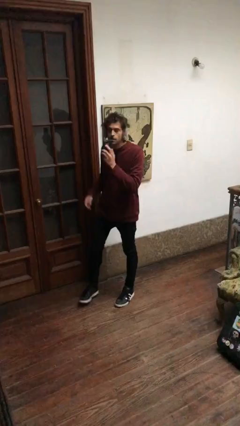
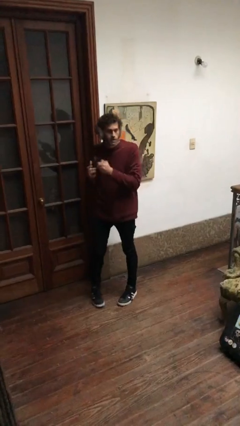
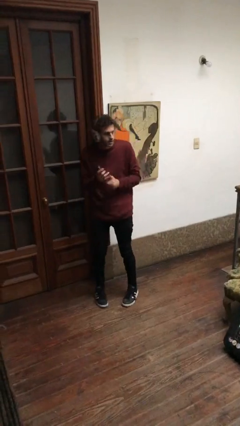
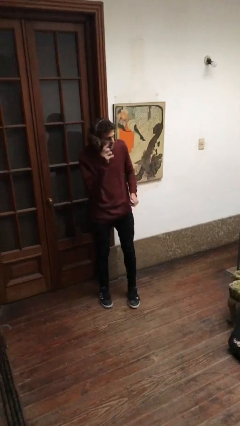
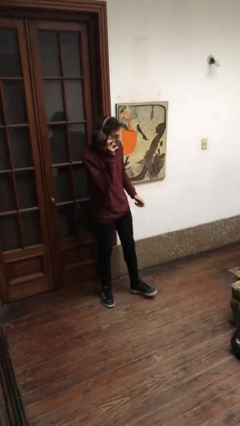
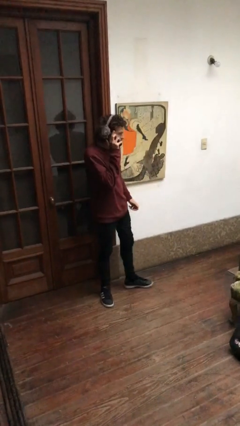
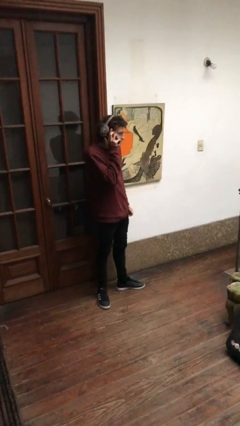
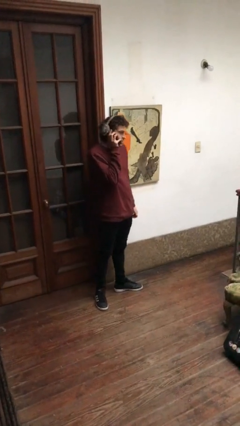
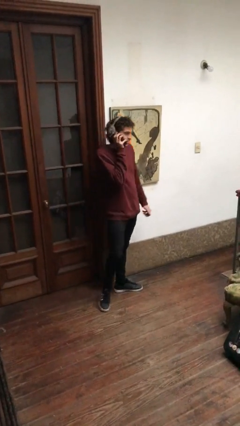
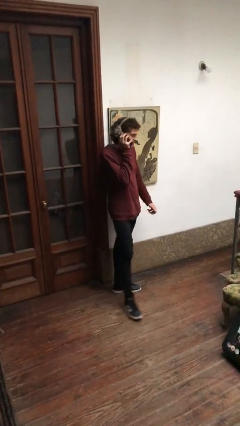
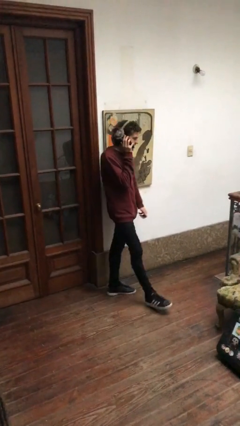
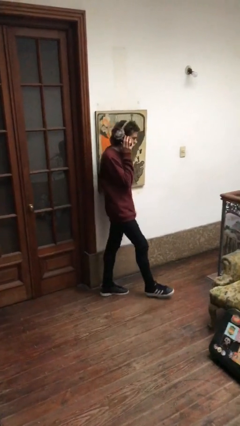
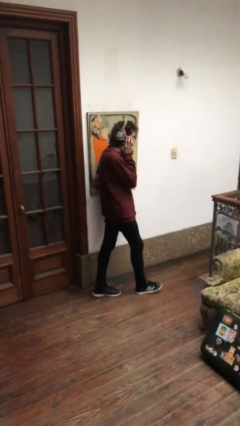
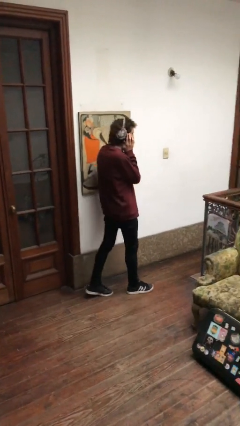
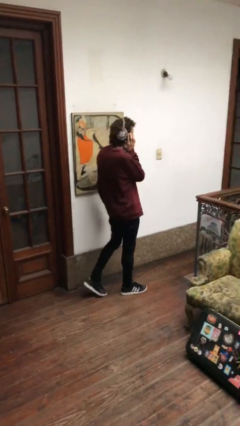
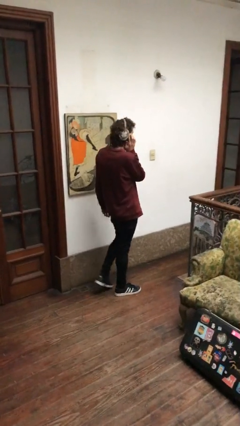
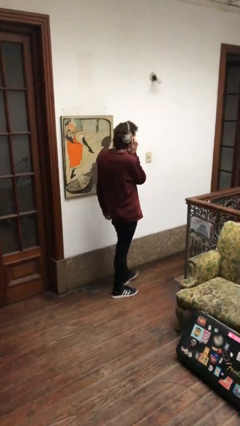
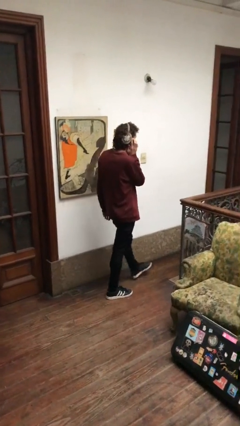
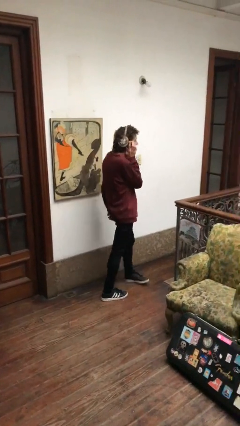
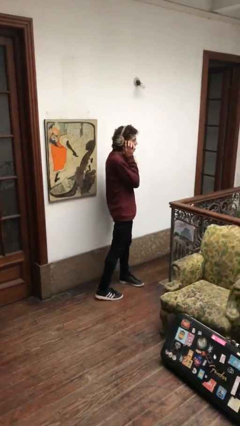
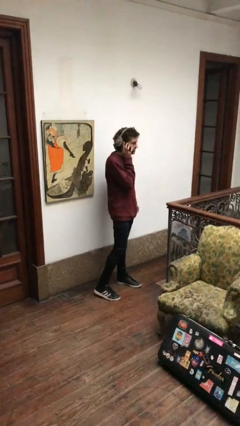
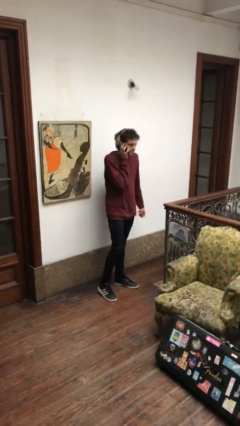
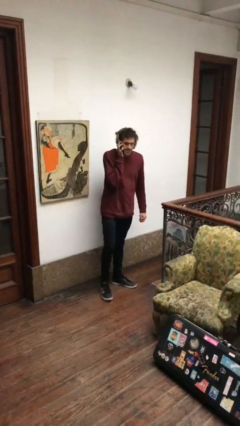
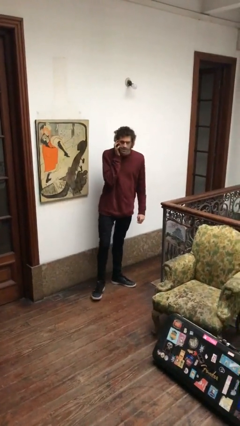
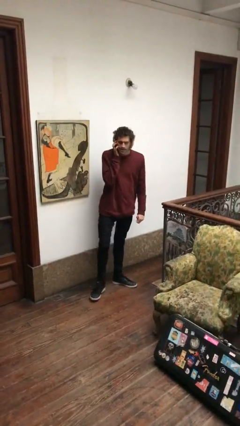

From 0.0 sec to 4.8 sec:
person talks on phone

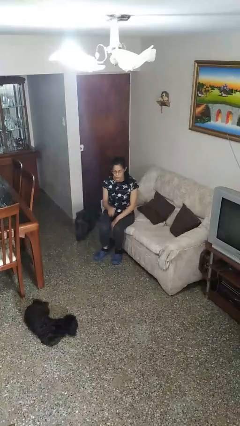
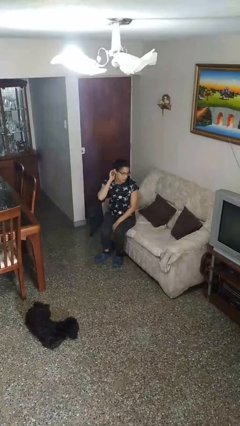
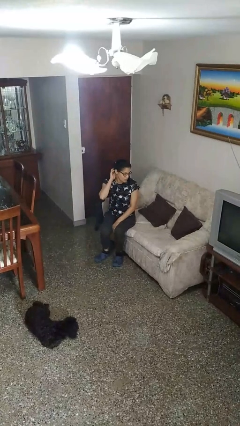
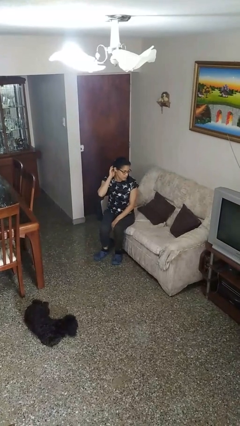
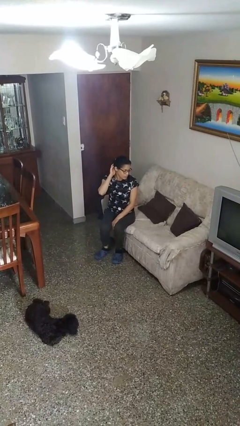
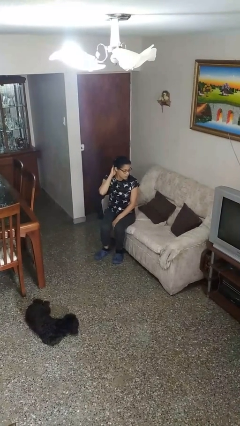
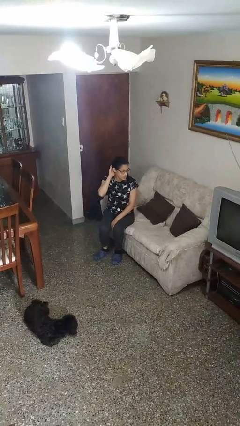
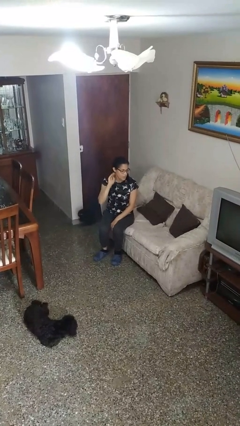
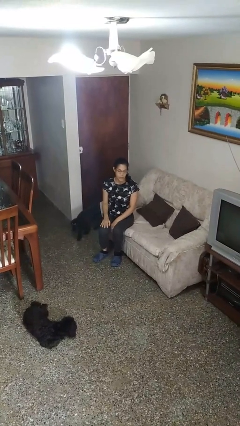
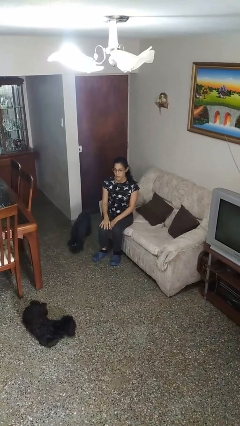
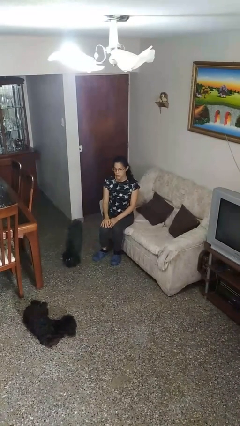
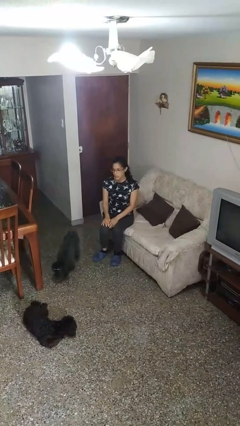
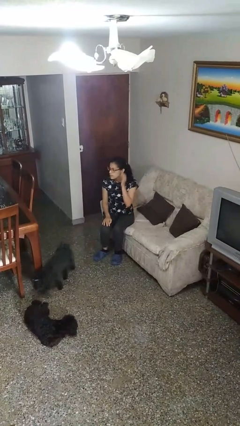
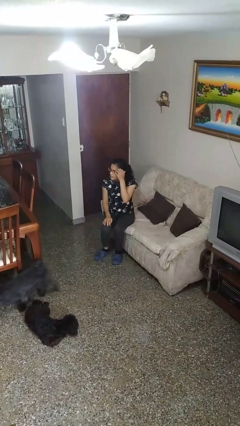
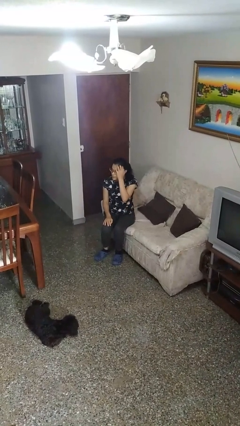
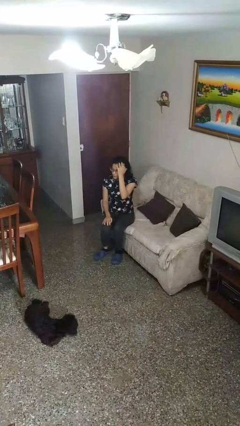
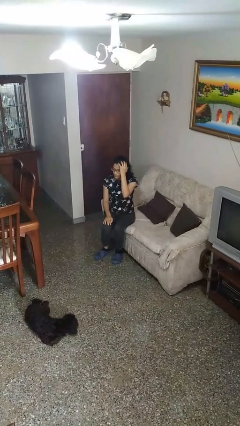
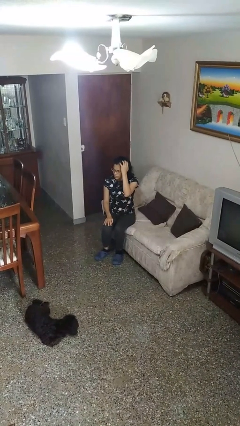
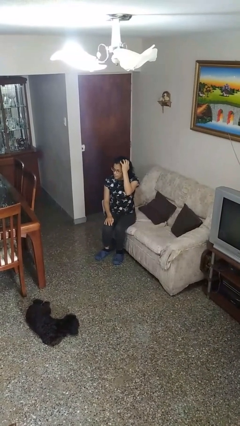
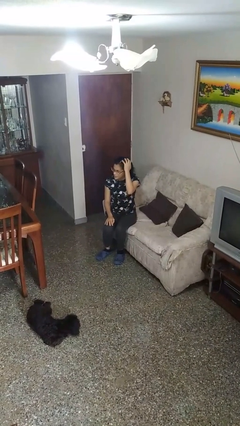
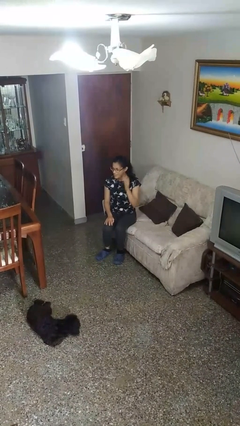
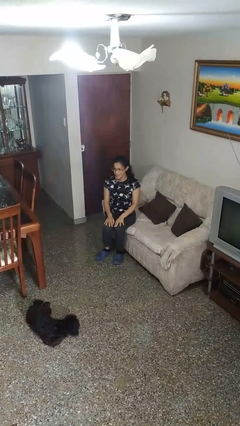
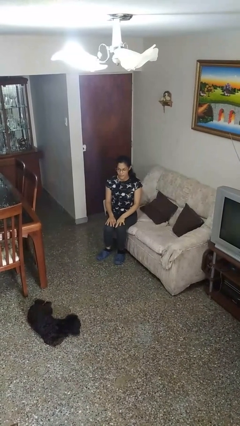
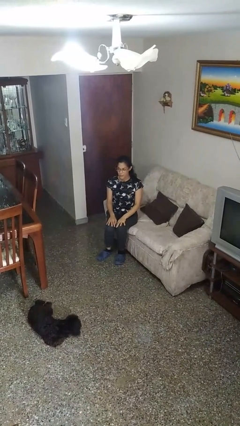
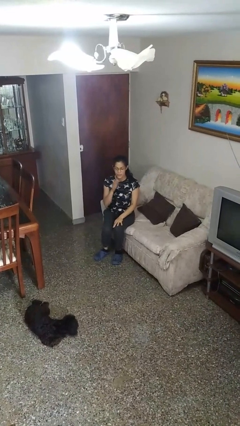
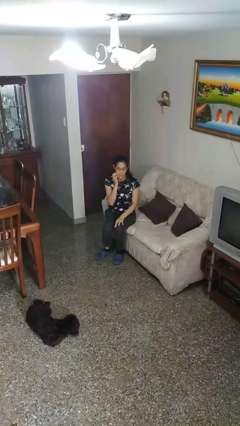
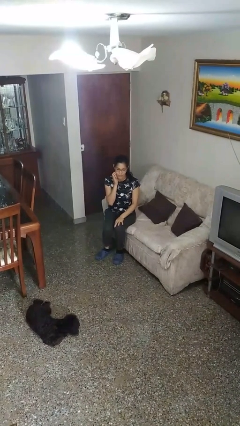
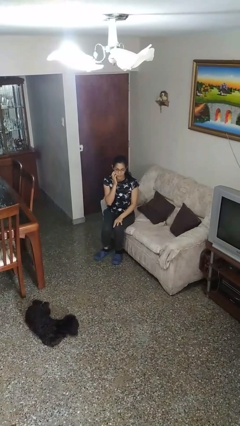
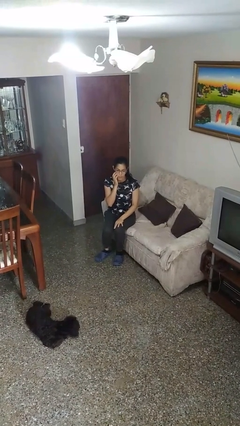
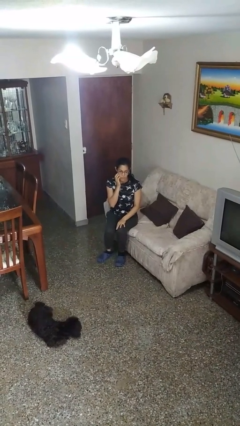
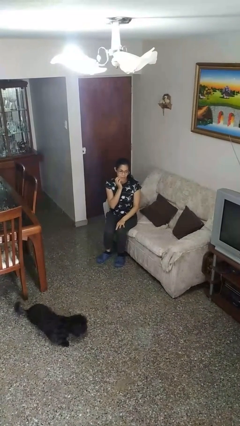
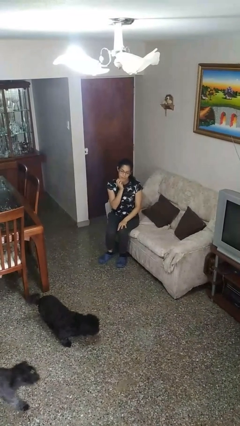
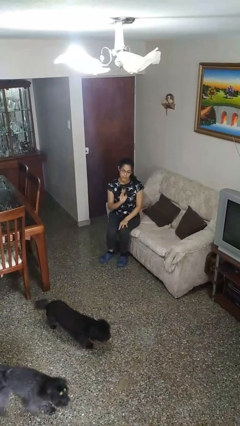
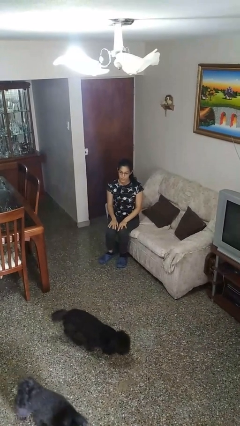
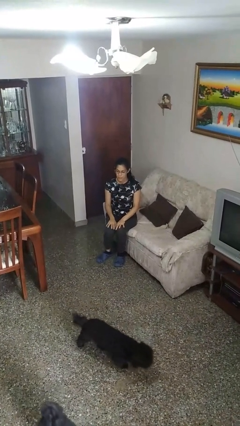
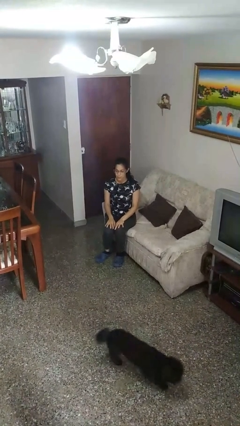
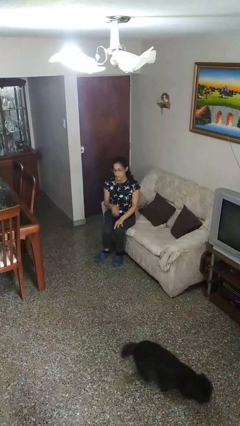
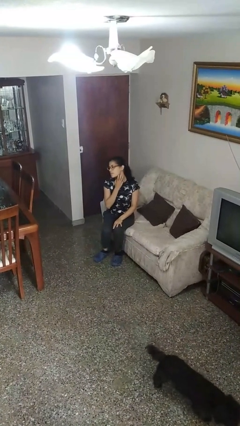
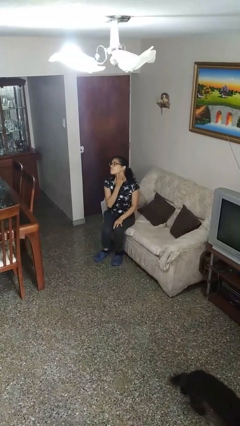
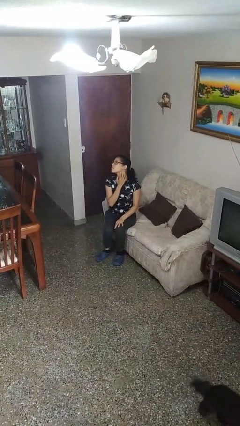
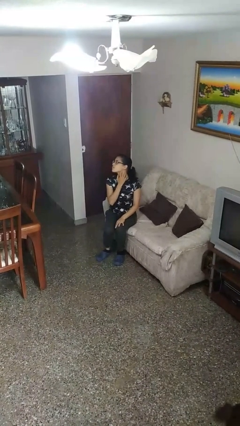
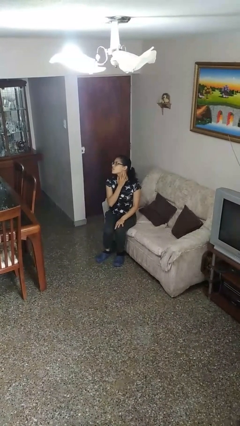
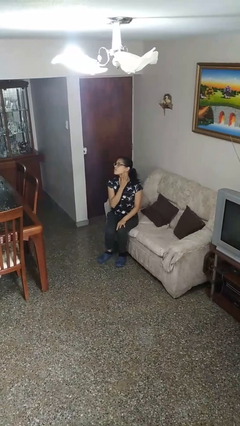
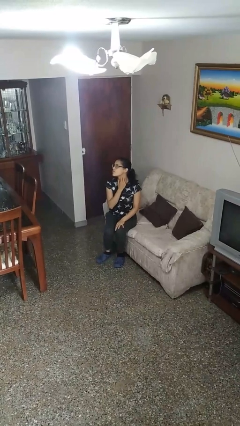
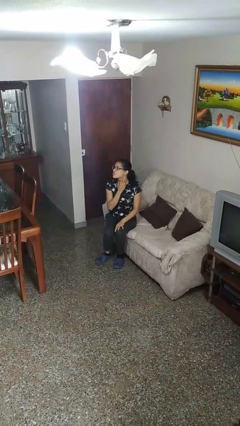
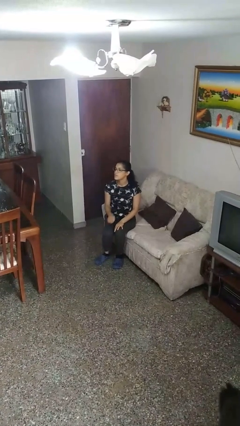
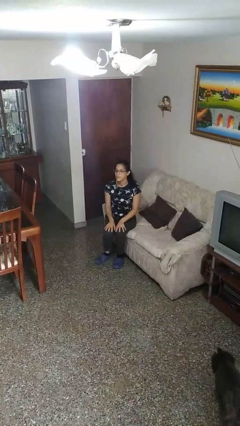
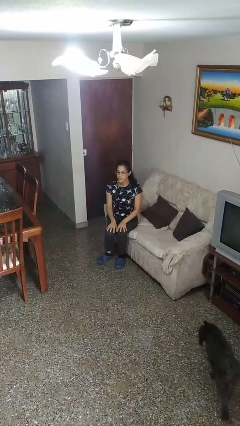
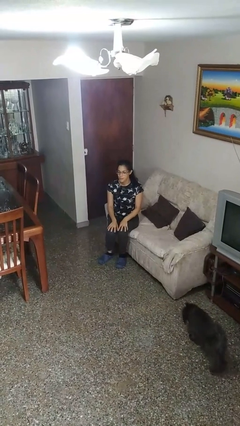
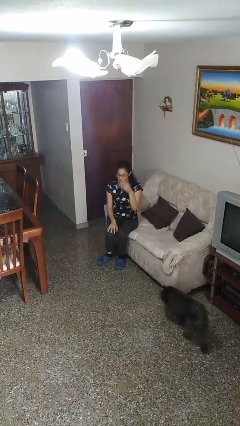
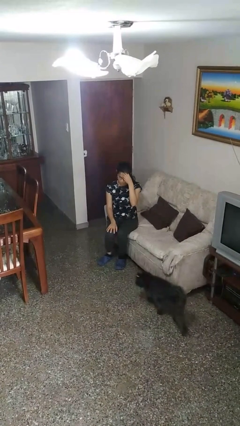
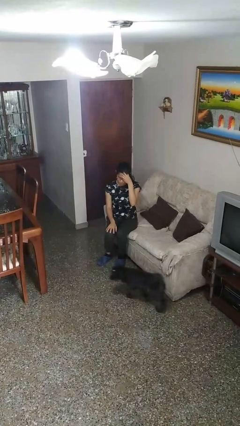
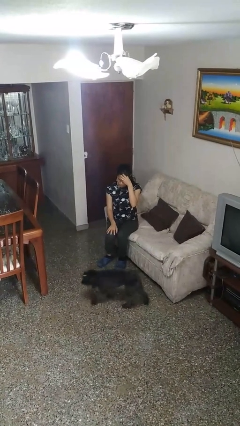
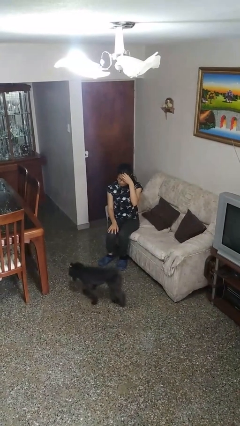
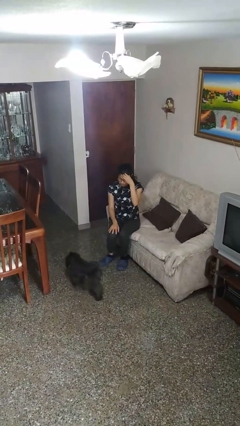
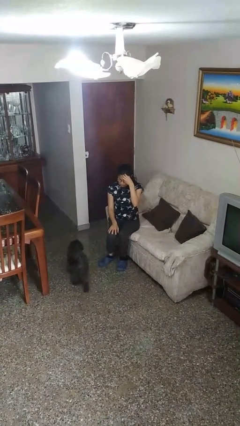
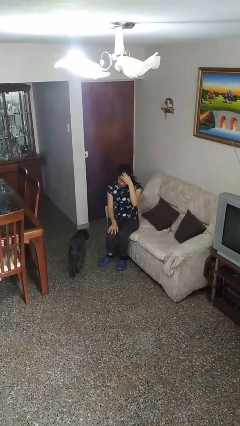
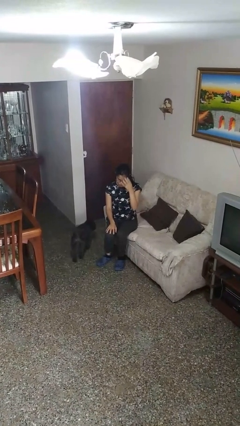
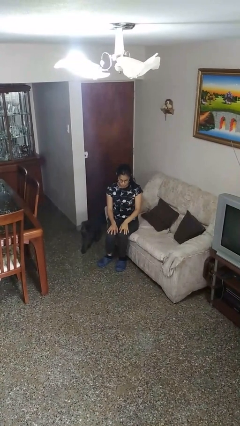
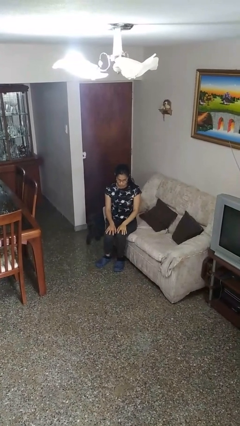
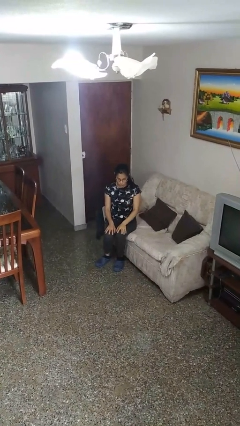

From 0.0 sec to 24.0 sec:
person scratches face

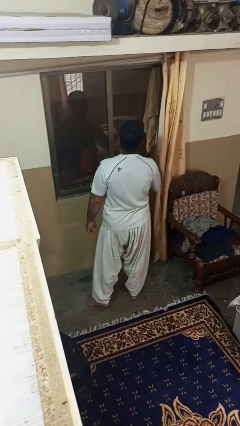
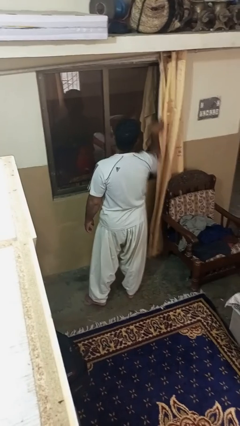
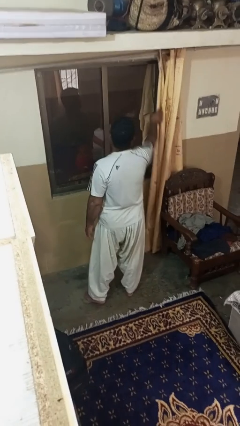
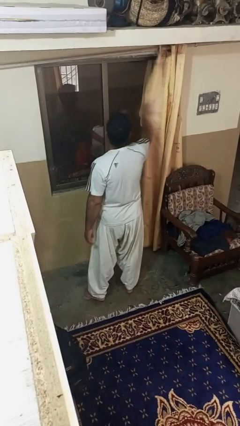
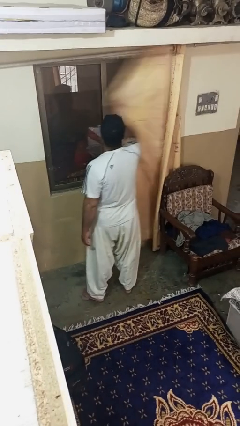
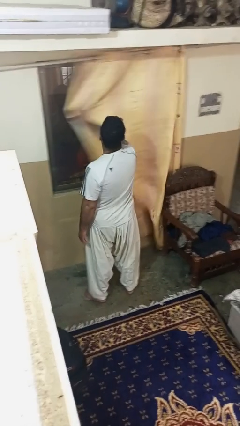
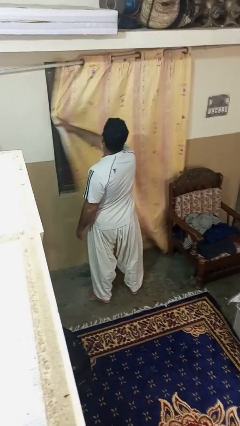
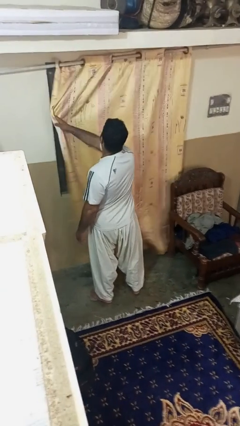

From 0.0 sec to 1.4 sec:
person closes curtains
